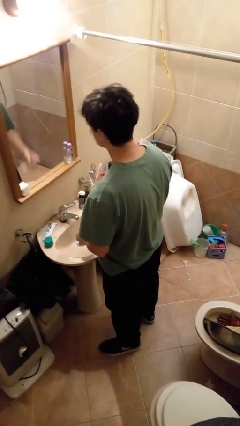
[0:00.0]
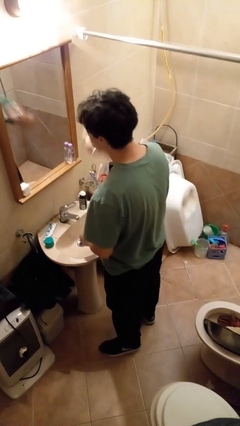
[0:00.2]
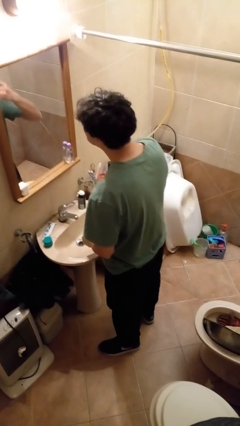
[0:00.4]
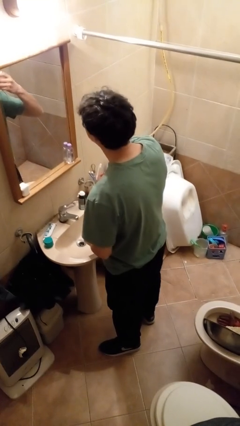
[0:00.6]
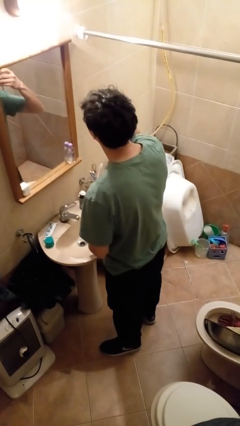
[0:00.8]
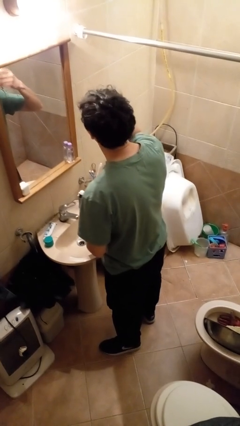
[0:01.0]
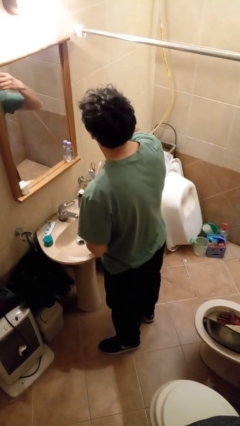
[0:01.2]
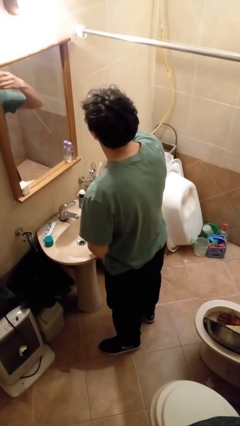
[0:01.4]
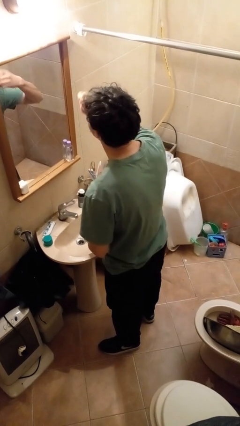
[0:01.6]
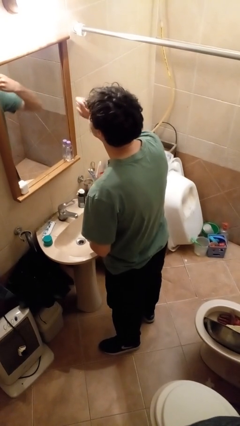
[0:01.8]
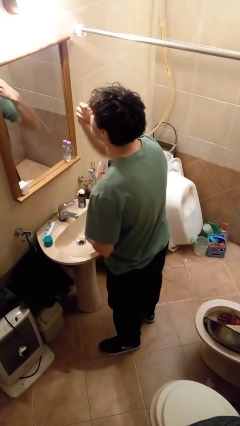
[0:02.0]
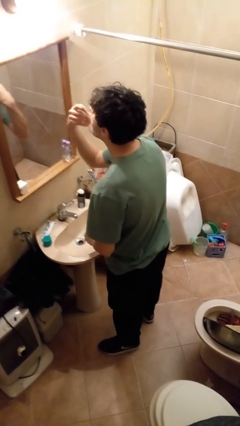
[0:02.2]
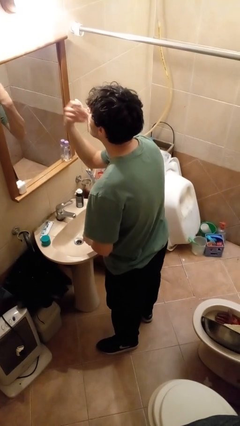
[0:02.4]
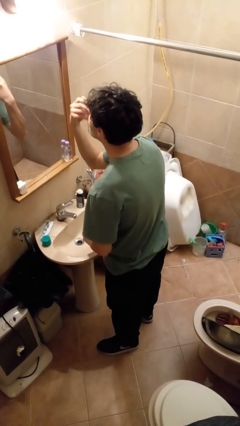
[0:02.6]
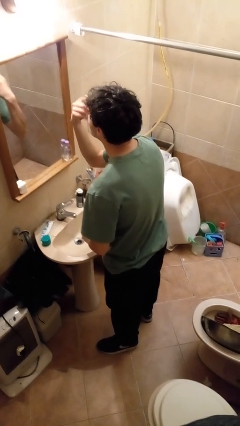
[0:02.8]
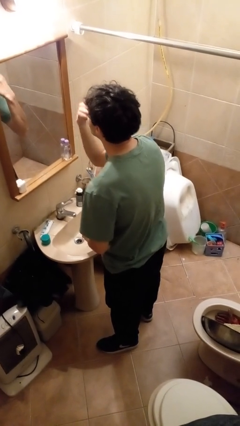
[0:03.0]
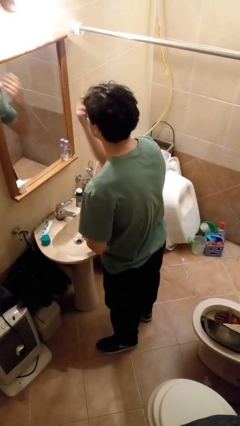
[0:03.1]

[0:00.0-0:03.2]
person shaves face

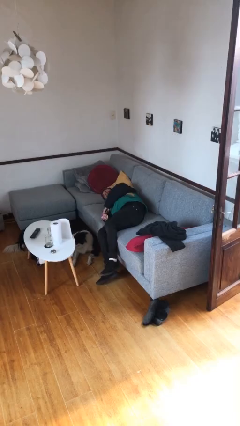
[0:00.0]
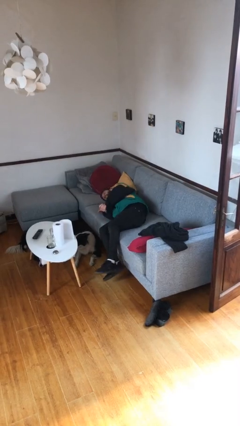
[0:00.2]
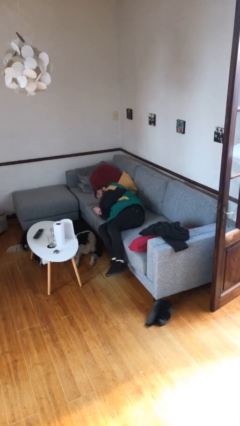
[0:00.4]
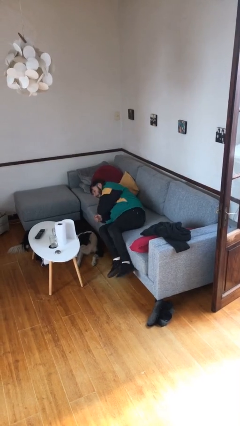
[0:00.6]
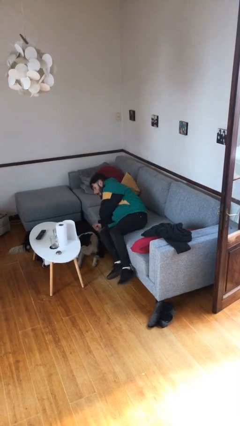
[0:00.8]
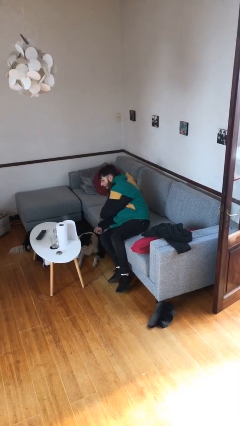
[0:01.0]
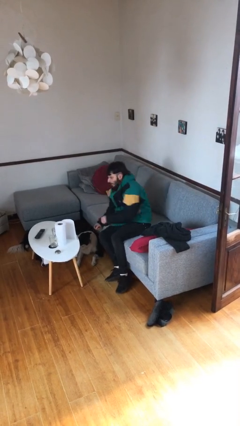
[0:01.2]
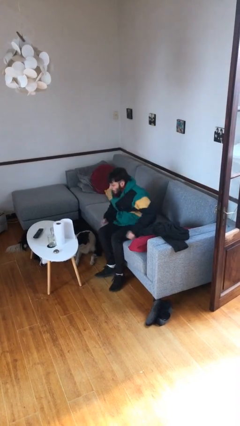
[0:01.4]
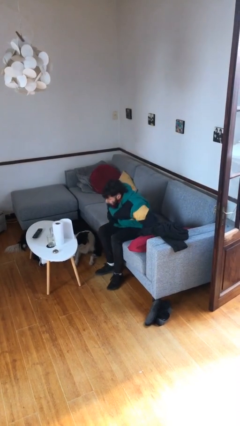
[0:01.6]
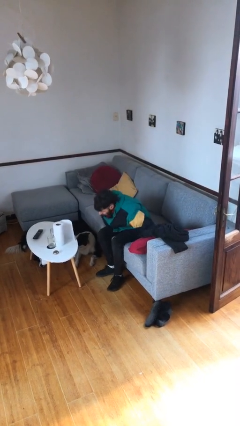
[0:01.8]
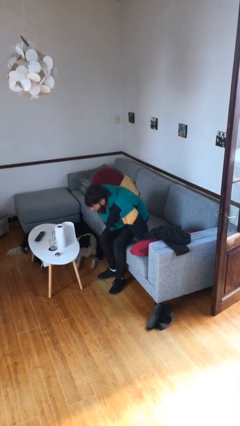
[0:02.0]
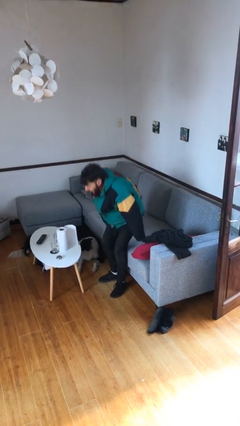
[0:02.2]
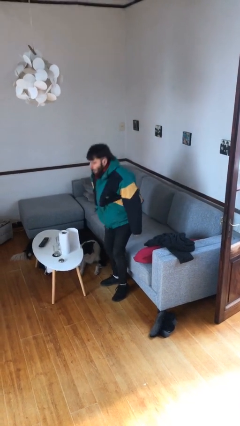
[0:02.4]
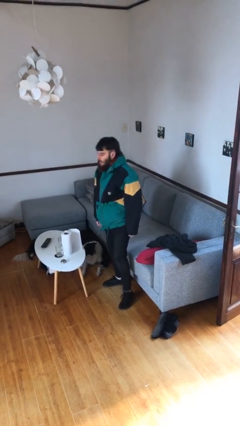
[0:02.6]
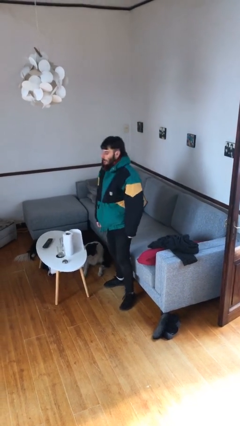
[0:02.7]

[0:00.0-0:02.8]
person stands up

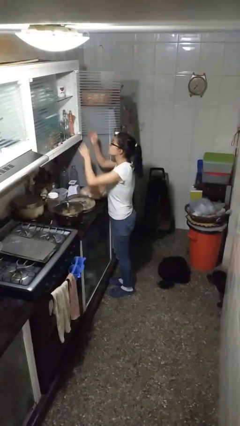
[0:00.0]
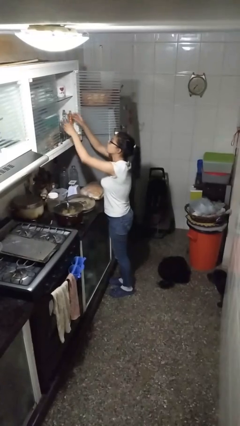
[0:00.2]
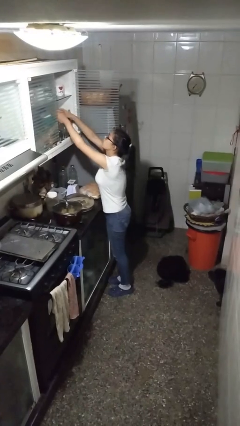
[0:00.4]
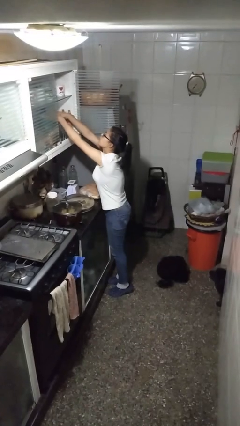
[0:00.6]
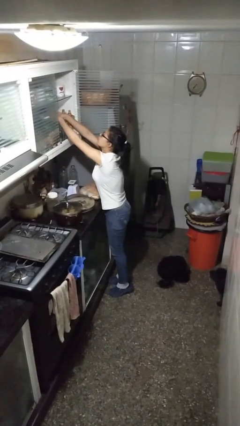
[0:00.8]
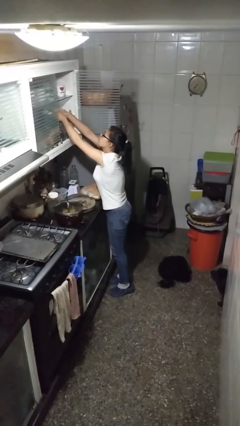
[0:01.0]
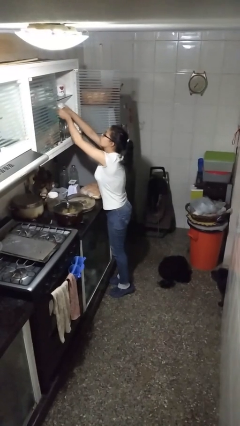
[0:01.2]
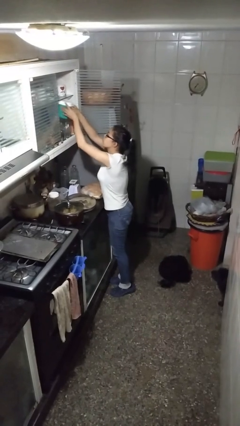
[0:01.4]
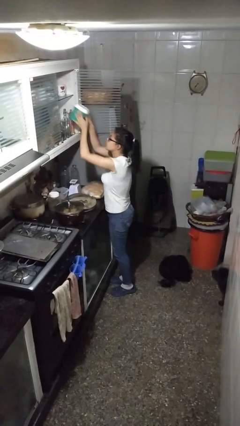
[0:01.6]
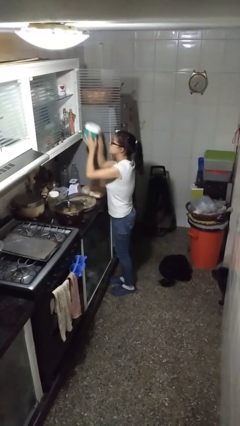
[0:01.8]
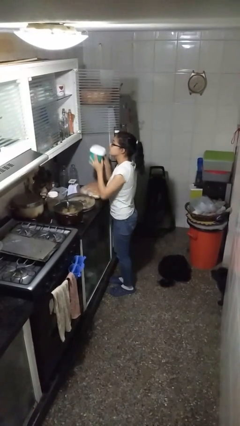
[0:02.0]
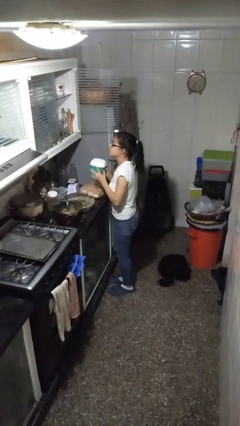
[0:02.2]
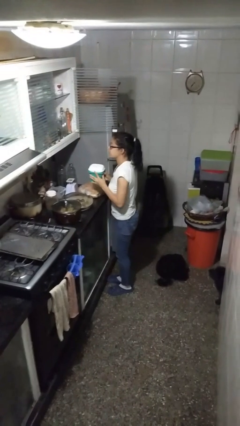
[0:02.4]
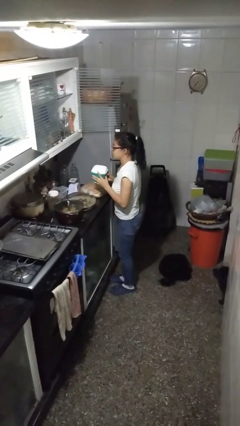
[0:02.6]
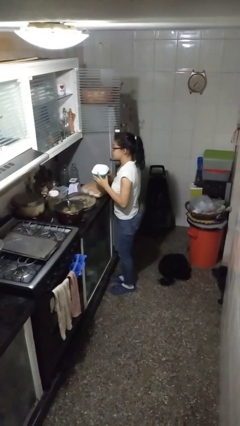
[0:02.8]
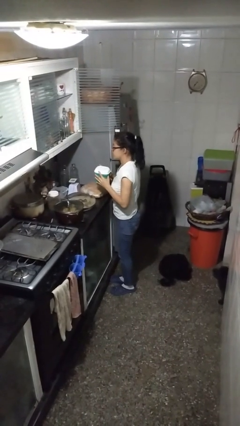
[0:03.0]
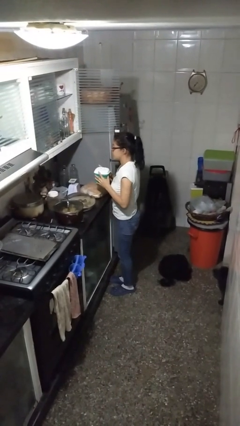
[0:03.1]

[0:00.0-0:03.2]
person picks up object from cabinet

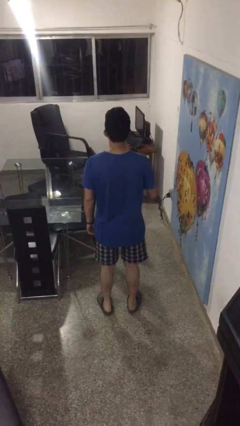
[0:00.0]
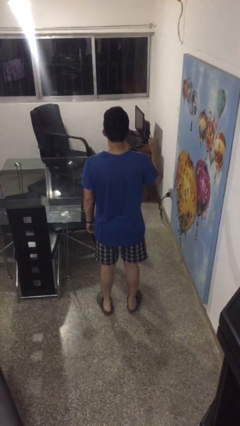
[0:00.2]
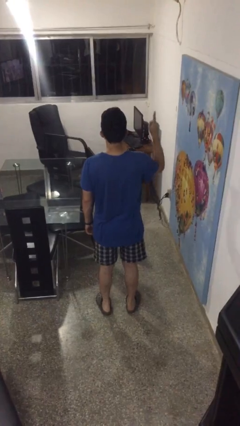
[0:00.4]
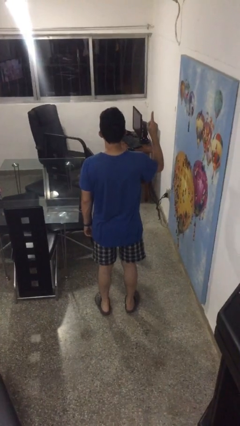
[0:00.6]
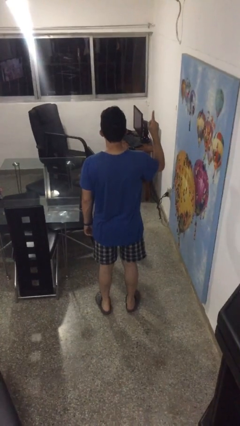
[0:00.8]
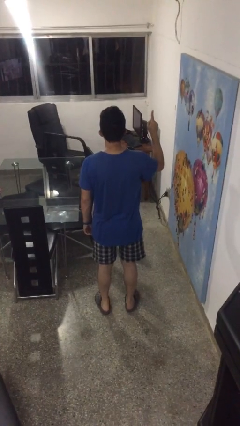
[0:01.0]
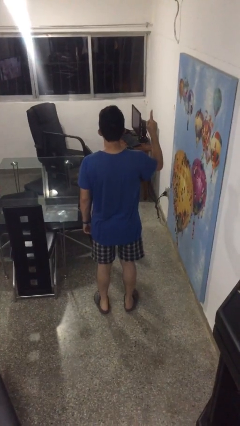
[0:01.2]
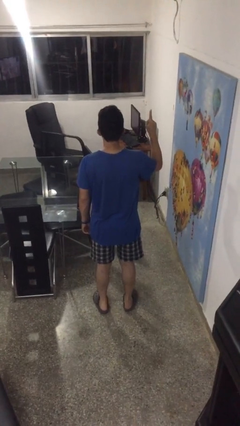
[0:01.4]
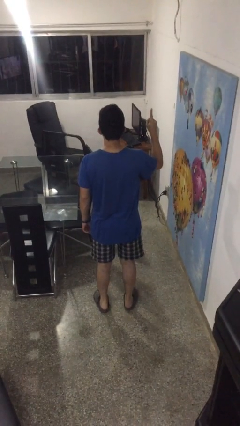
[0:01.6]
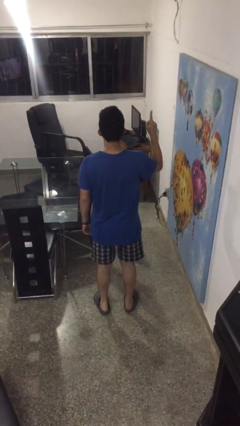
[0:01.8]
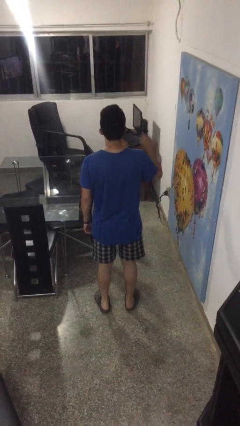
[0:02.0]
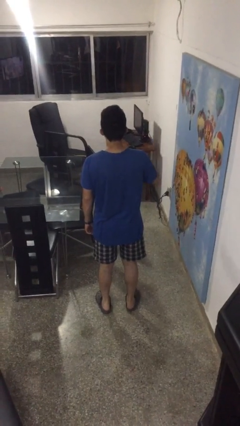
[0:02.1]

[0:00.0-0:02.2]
person gestures number one

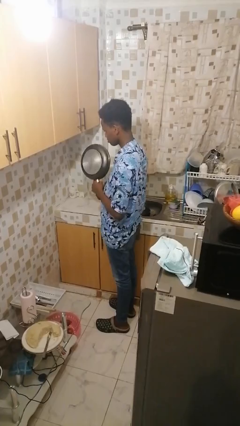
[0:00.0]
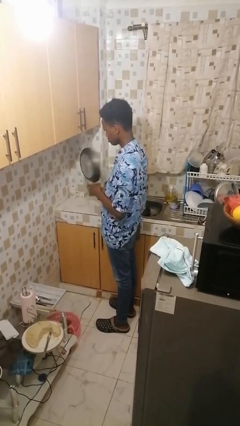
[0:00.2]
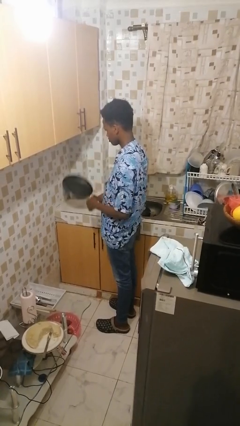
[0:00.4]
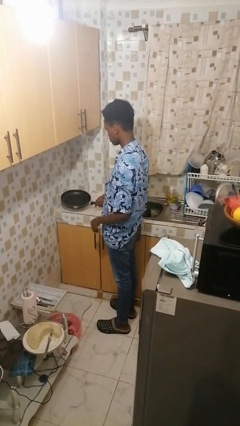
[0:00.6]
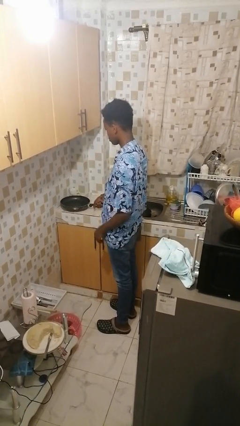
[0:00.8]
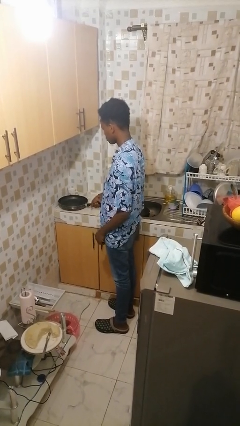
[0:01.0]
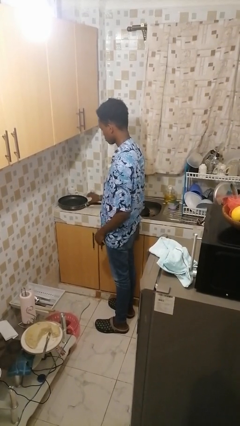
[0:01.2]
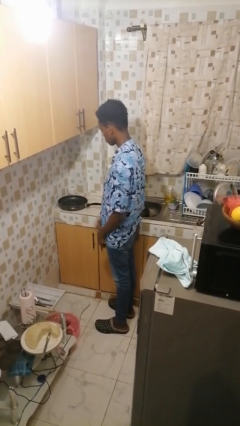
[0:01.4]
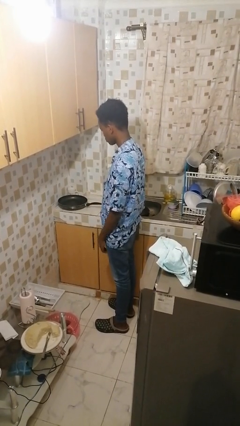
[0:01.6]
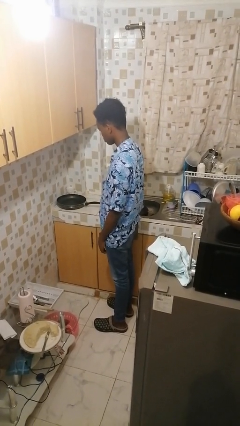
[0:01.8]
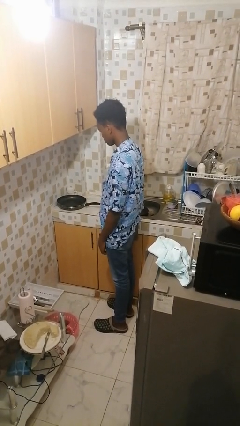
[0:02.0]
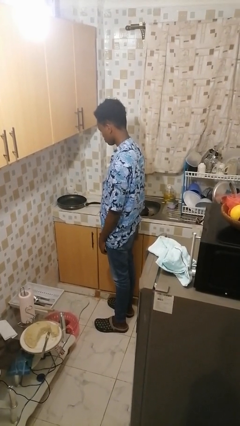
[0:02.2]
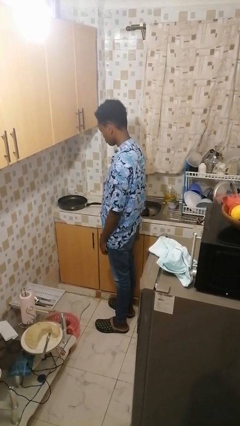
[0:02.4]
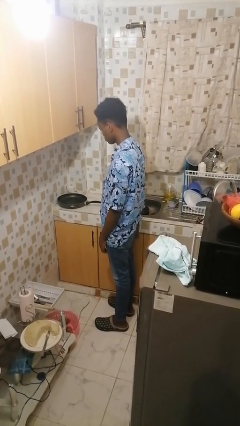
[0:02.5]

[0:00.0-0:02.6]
person puts down object on countertop

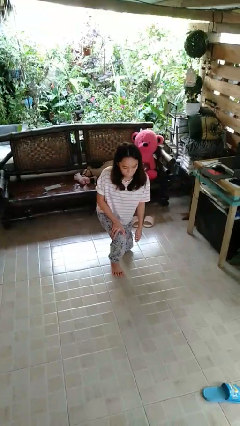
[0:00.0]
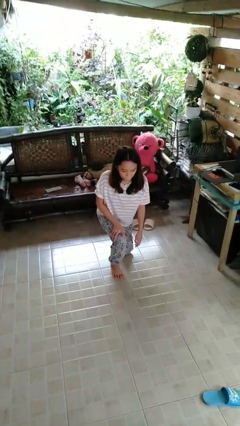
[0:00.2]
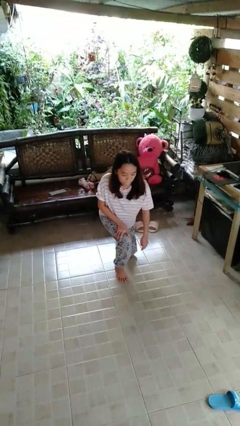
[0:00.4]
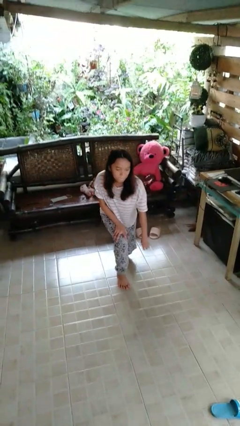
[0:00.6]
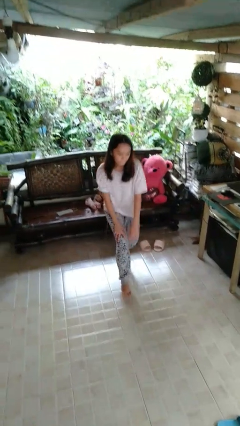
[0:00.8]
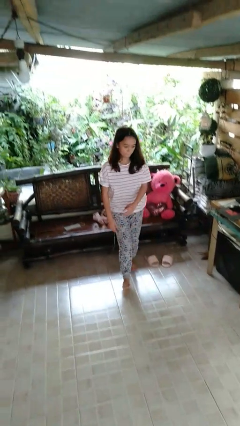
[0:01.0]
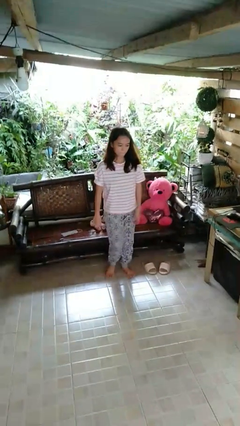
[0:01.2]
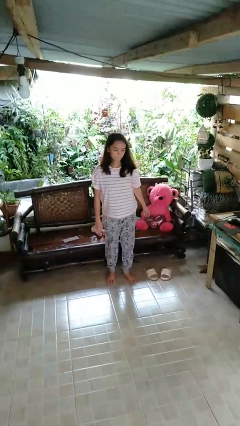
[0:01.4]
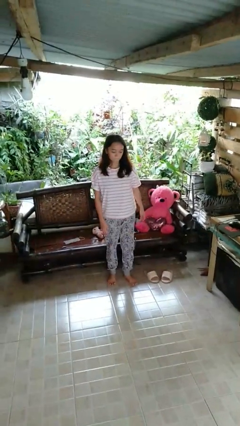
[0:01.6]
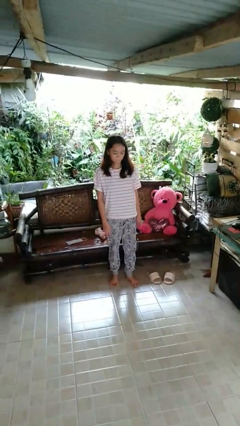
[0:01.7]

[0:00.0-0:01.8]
person stands up from floor

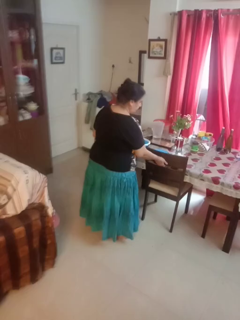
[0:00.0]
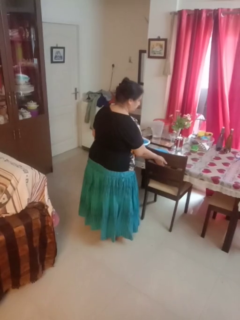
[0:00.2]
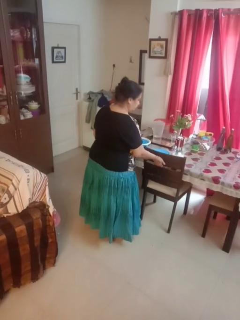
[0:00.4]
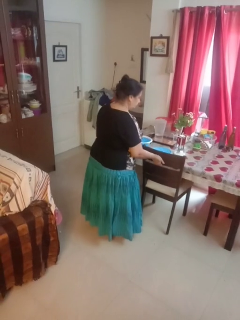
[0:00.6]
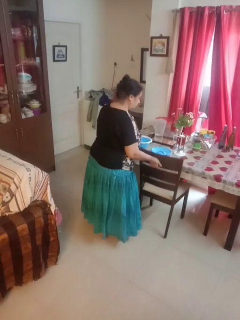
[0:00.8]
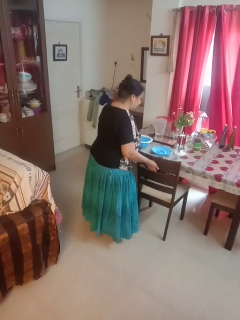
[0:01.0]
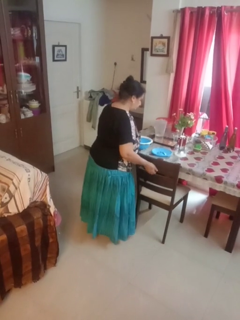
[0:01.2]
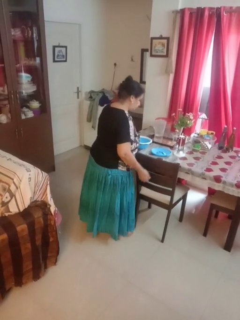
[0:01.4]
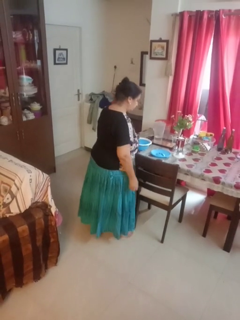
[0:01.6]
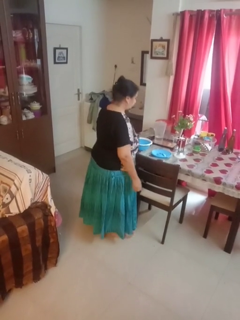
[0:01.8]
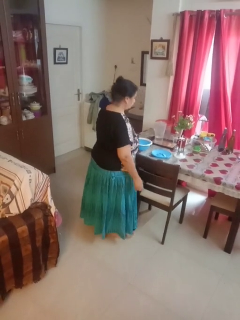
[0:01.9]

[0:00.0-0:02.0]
person pulls out chair

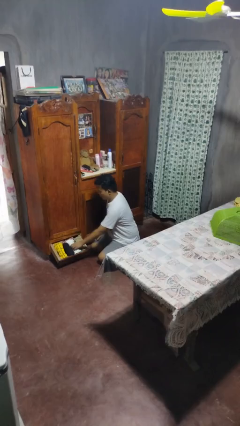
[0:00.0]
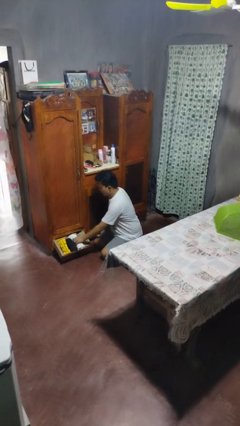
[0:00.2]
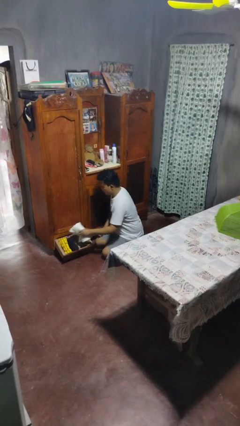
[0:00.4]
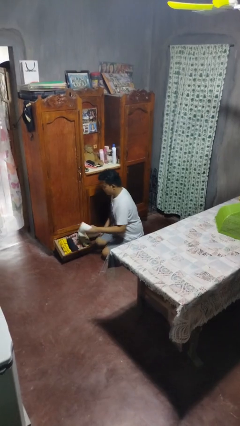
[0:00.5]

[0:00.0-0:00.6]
person takes clothes from dresser
